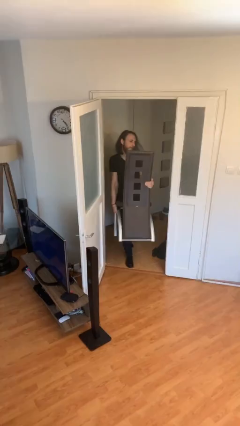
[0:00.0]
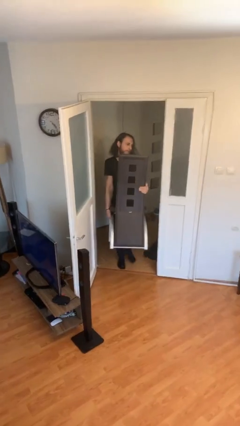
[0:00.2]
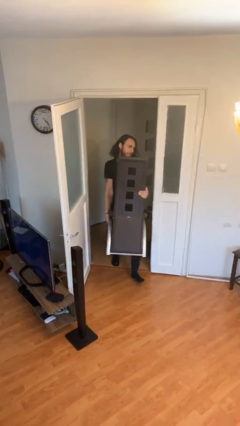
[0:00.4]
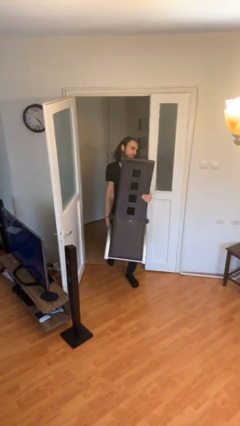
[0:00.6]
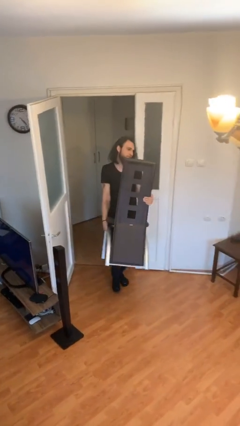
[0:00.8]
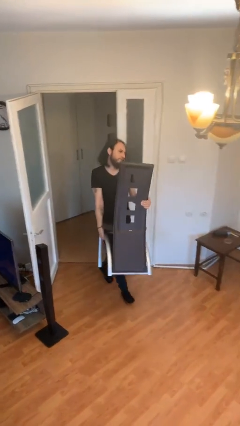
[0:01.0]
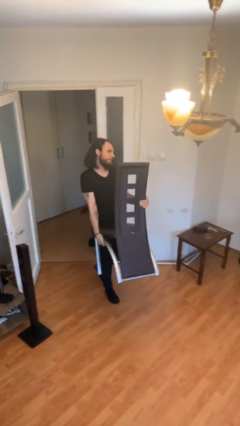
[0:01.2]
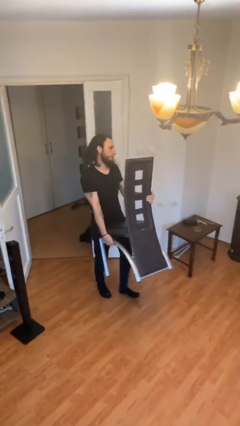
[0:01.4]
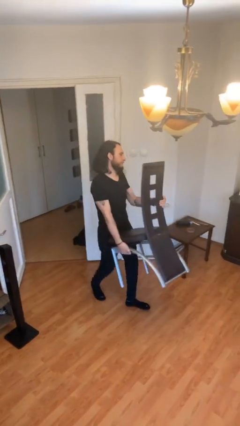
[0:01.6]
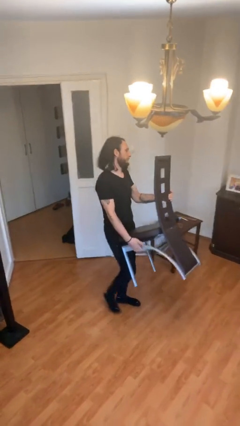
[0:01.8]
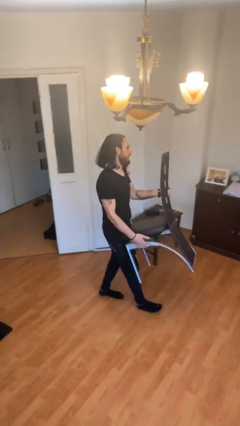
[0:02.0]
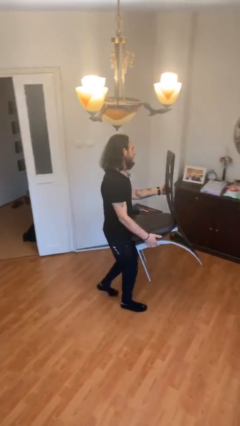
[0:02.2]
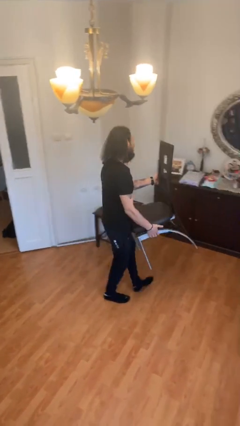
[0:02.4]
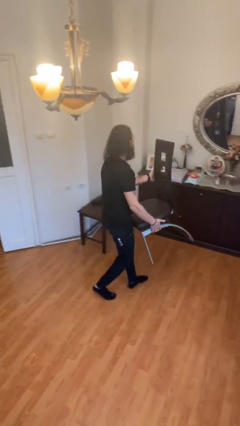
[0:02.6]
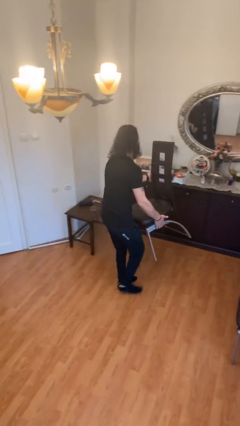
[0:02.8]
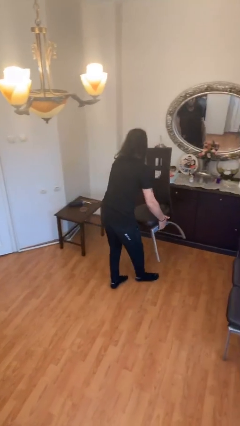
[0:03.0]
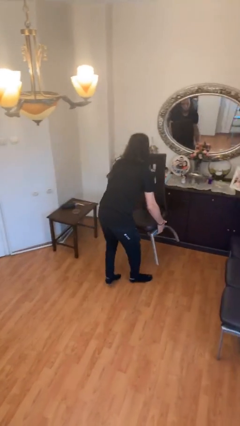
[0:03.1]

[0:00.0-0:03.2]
person carries heavy object

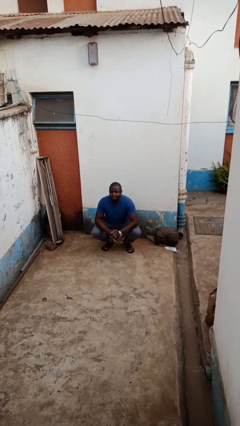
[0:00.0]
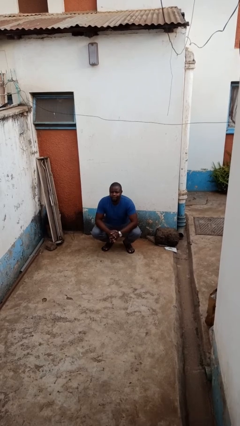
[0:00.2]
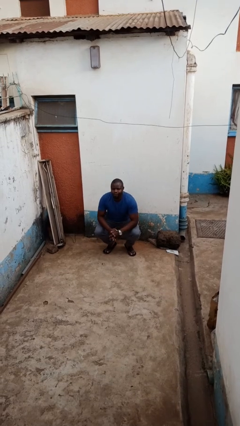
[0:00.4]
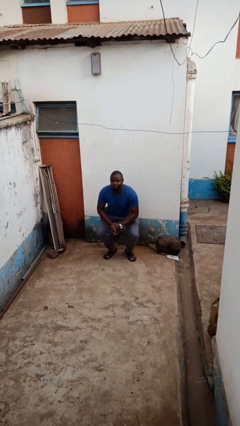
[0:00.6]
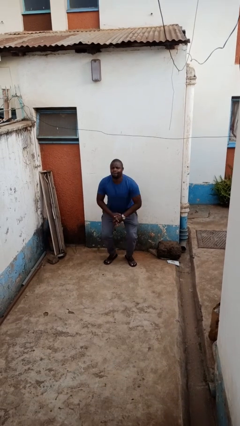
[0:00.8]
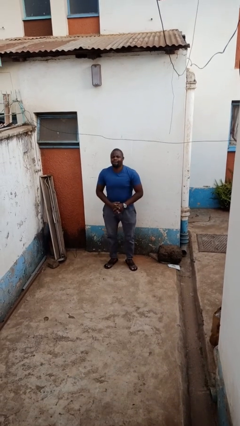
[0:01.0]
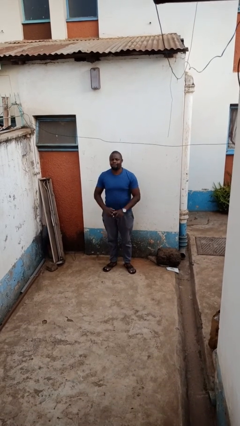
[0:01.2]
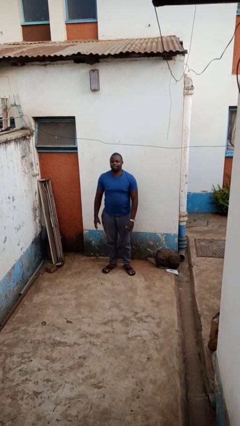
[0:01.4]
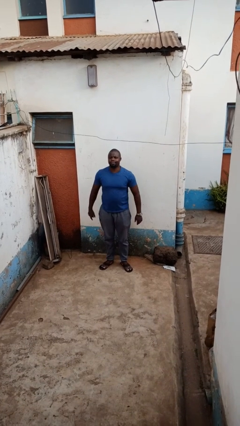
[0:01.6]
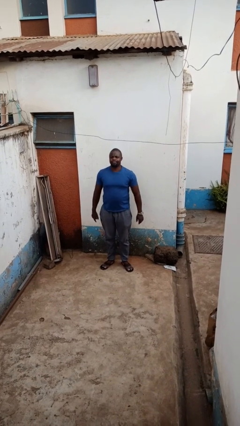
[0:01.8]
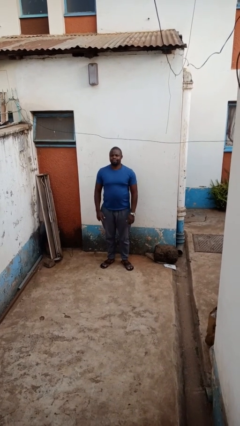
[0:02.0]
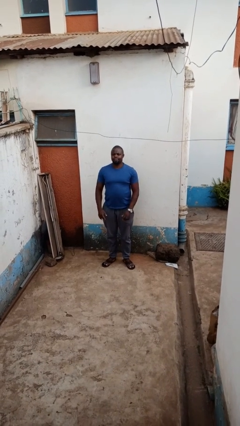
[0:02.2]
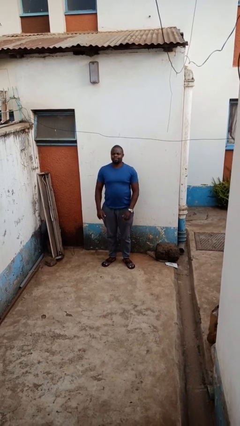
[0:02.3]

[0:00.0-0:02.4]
person stands up

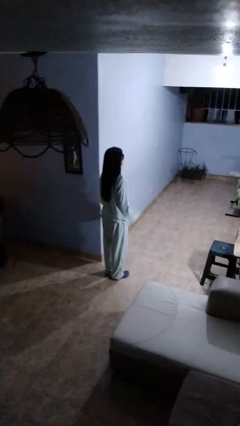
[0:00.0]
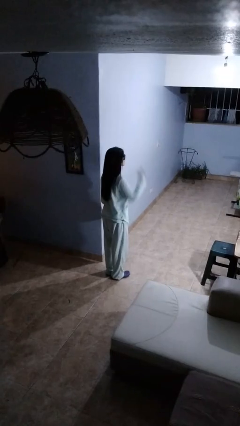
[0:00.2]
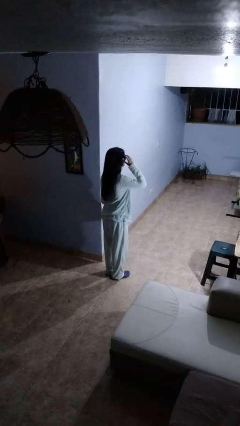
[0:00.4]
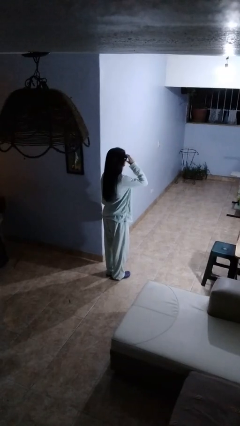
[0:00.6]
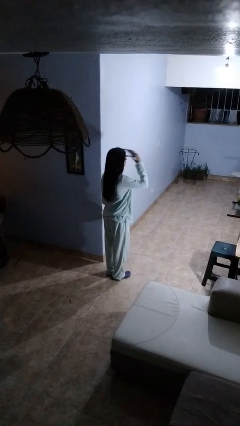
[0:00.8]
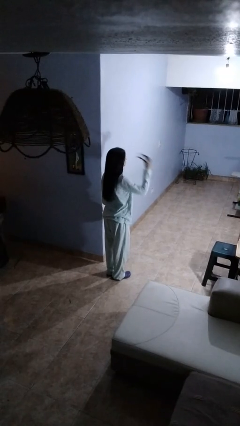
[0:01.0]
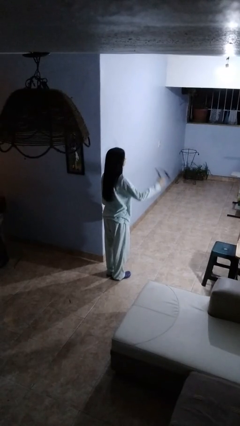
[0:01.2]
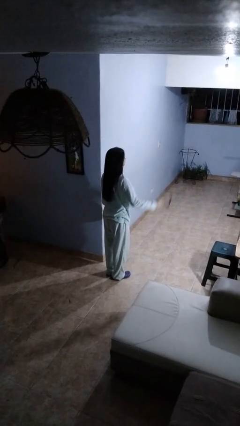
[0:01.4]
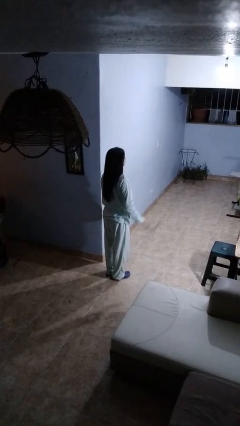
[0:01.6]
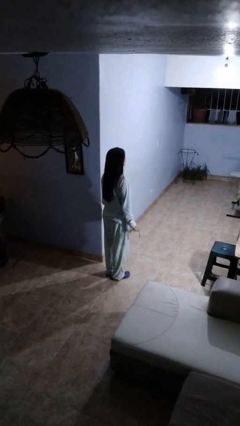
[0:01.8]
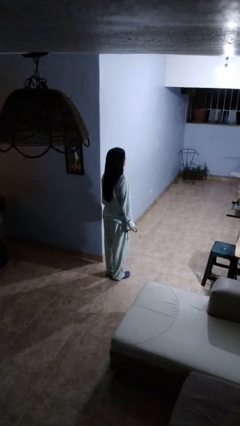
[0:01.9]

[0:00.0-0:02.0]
person takes off sunglasses

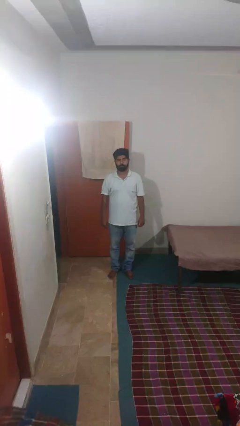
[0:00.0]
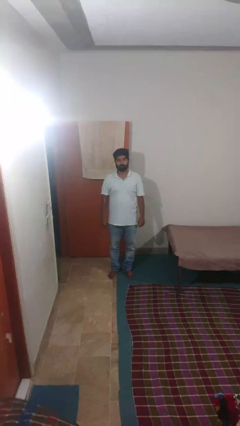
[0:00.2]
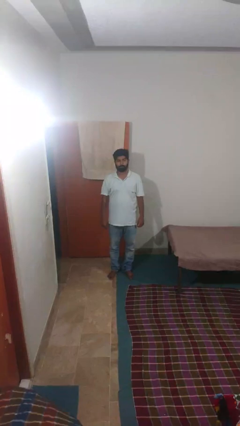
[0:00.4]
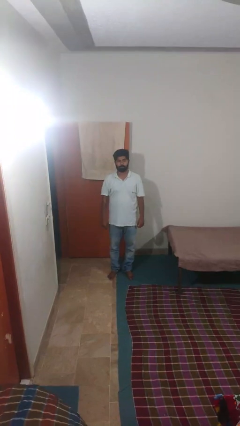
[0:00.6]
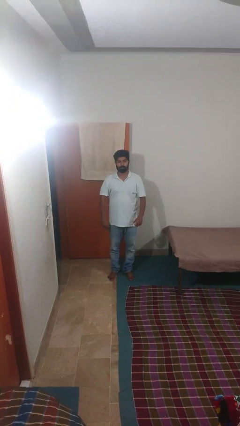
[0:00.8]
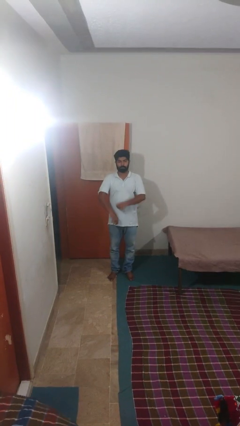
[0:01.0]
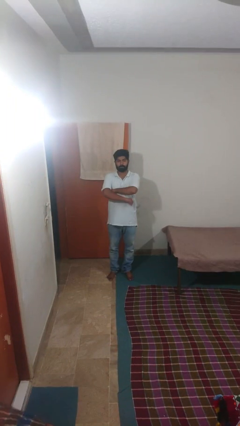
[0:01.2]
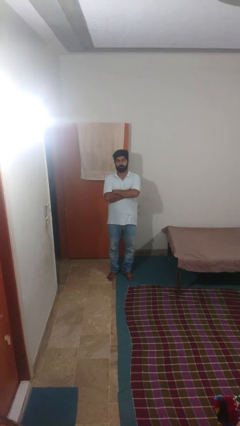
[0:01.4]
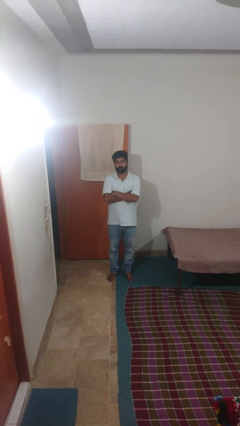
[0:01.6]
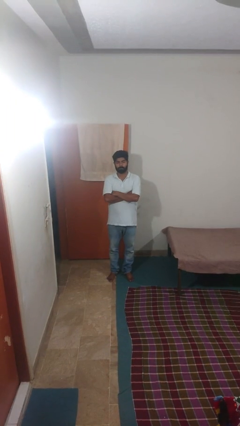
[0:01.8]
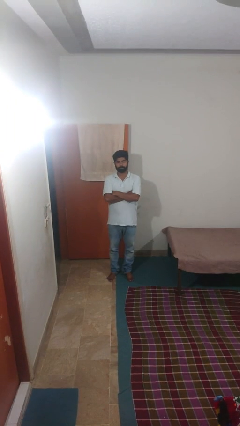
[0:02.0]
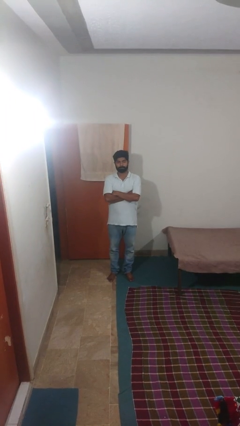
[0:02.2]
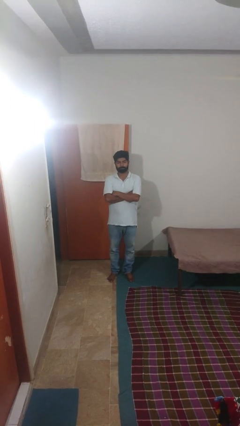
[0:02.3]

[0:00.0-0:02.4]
person crosses arms

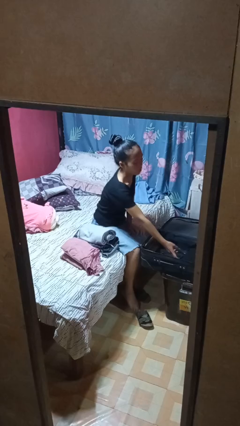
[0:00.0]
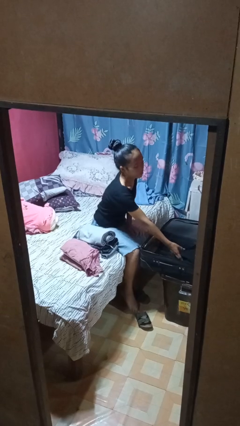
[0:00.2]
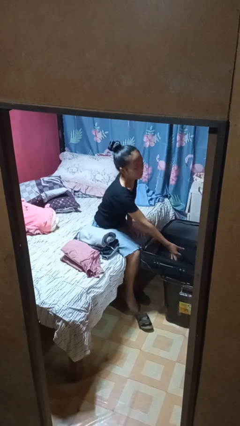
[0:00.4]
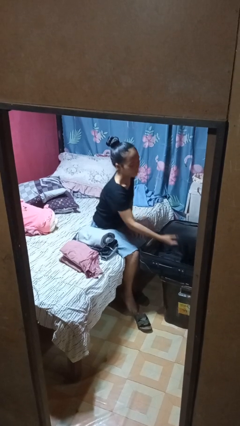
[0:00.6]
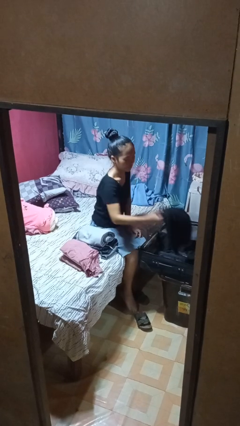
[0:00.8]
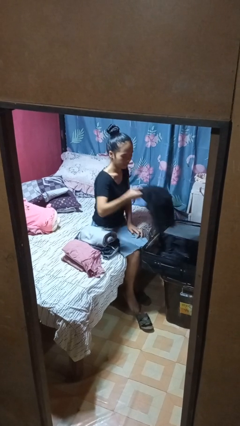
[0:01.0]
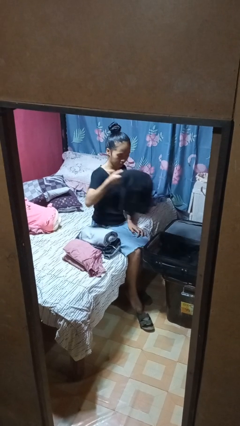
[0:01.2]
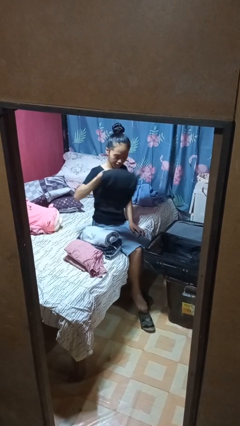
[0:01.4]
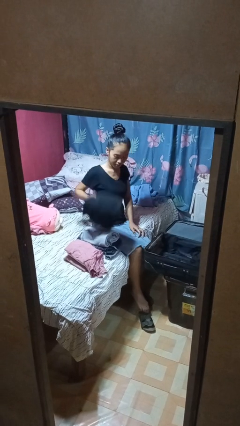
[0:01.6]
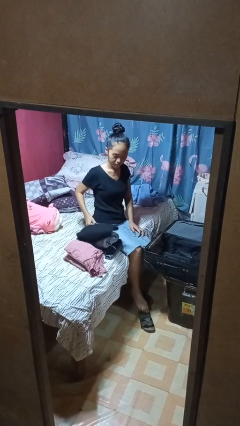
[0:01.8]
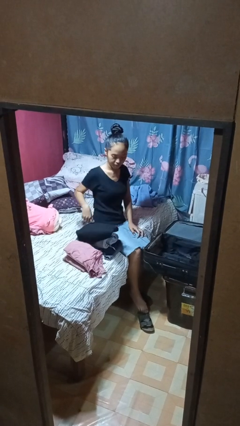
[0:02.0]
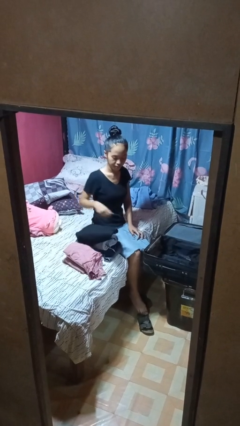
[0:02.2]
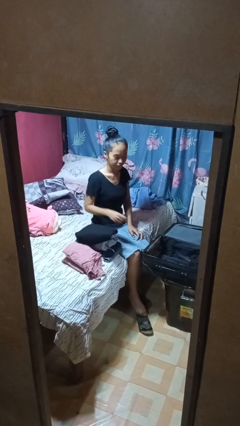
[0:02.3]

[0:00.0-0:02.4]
person unloads clothes from suitcase

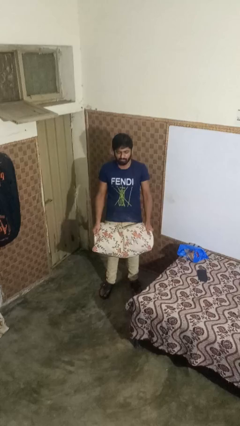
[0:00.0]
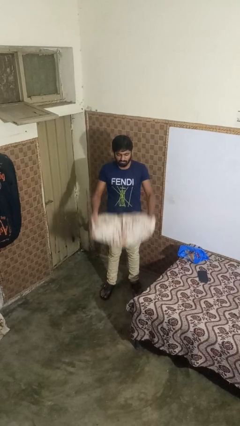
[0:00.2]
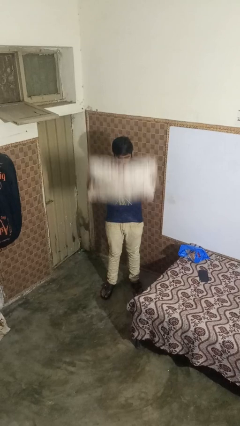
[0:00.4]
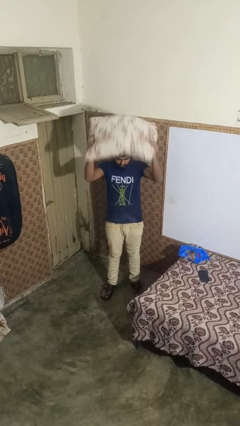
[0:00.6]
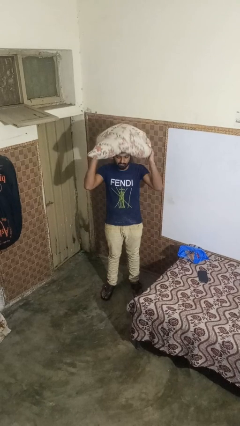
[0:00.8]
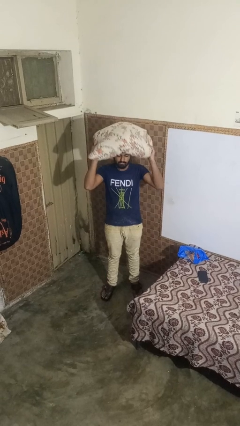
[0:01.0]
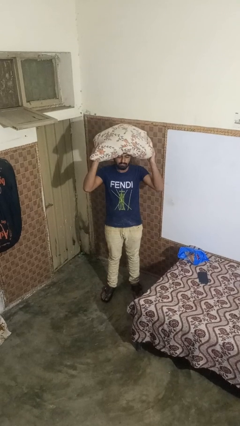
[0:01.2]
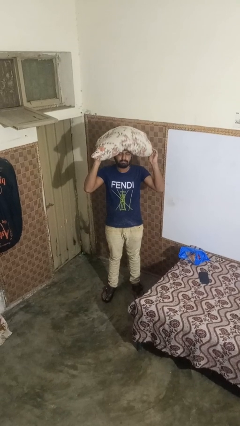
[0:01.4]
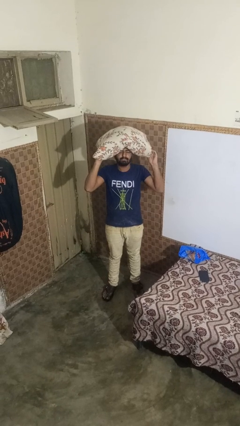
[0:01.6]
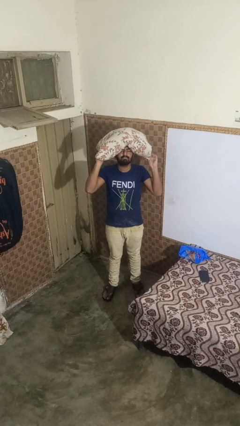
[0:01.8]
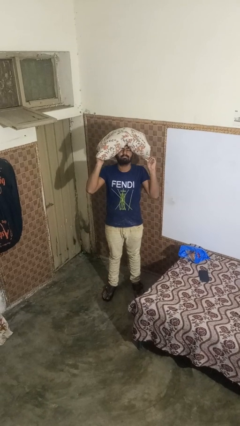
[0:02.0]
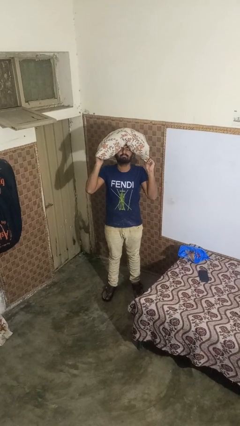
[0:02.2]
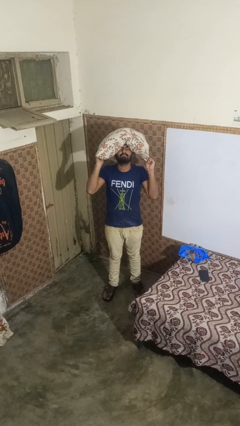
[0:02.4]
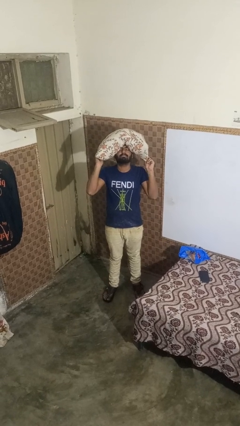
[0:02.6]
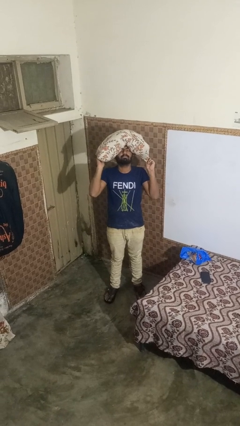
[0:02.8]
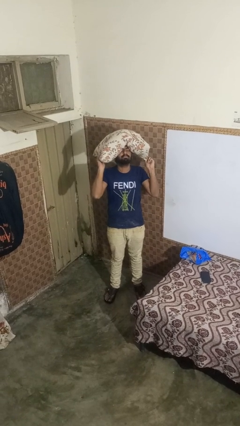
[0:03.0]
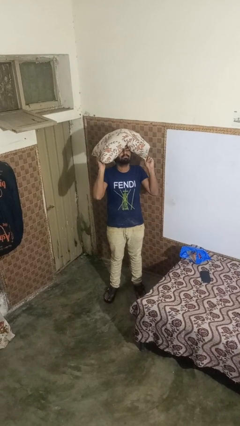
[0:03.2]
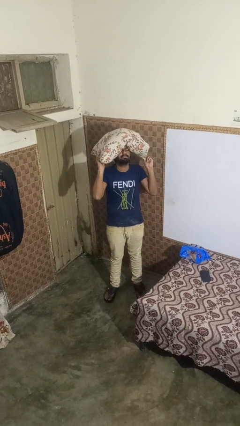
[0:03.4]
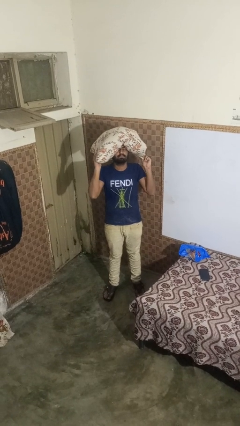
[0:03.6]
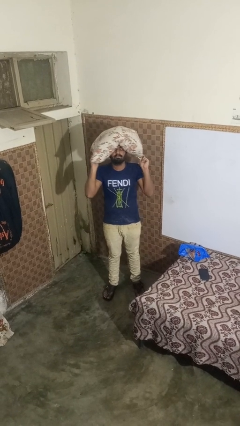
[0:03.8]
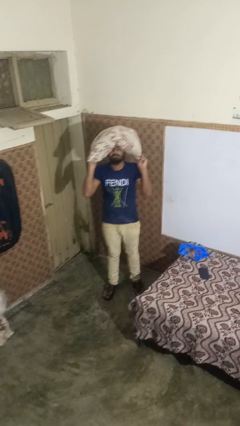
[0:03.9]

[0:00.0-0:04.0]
person holds object above head

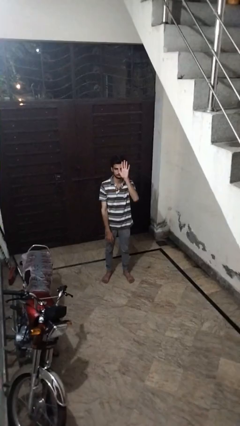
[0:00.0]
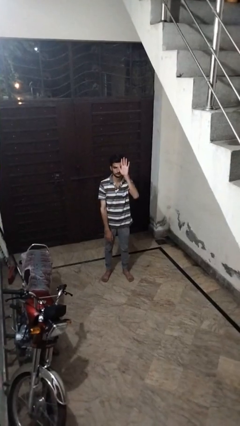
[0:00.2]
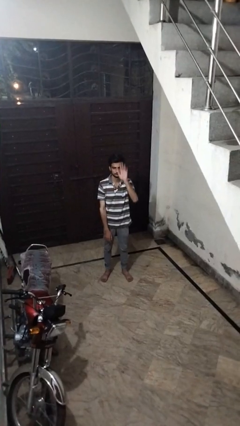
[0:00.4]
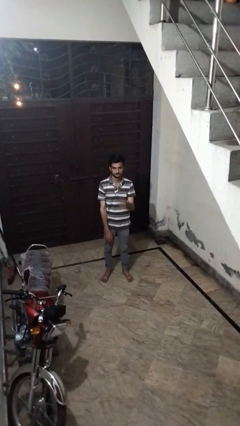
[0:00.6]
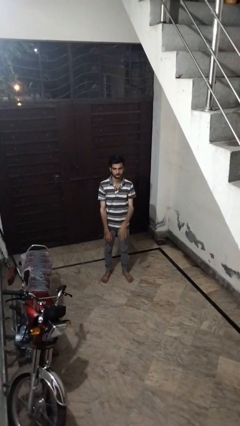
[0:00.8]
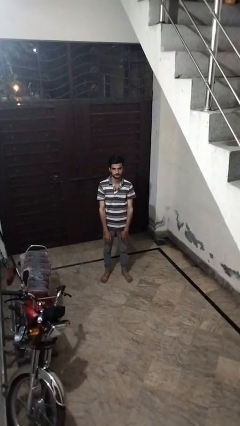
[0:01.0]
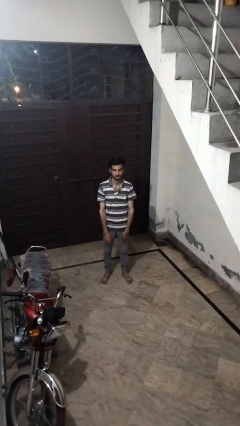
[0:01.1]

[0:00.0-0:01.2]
person gestures lower hand
